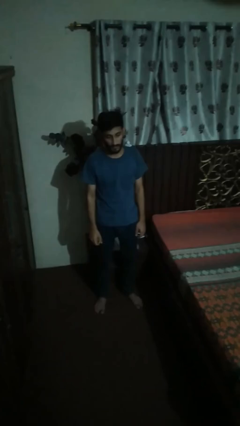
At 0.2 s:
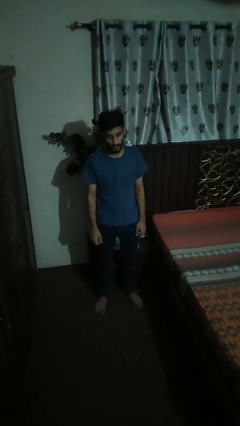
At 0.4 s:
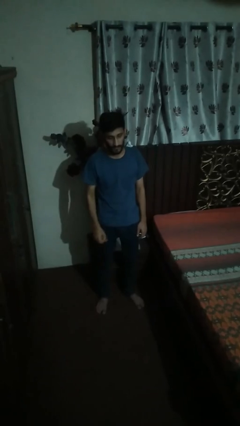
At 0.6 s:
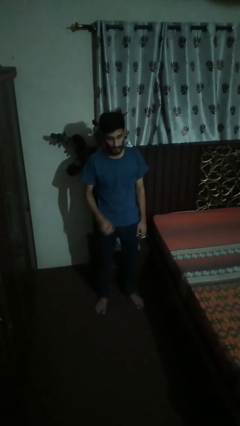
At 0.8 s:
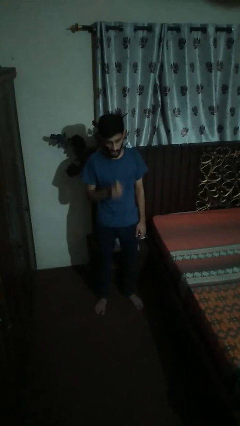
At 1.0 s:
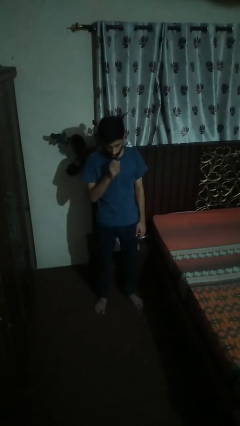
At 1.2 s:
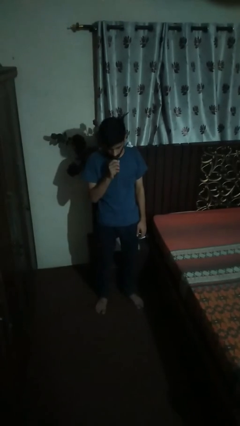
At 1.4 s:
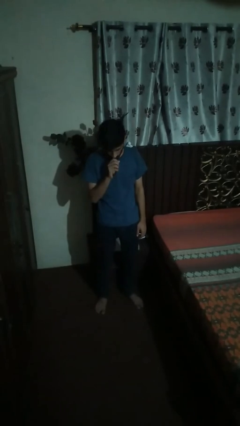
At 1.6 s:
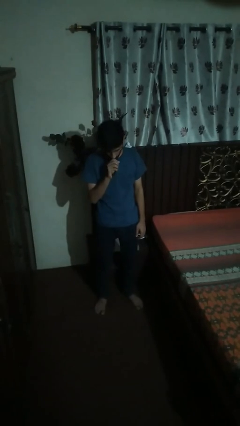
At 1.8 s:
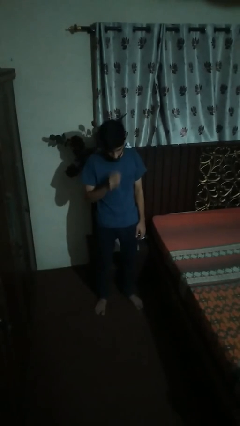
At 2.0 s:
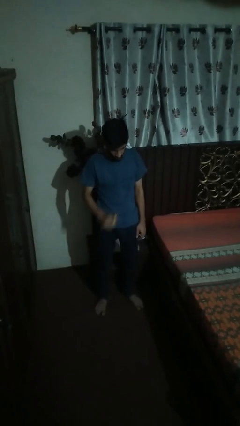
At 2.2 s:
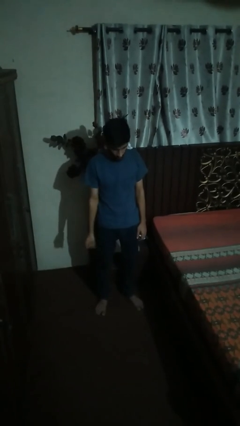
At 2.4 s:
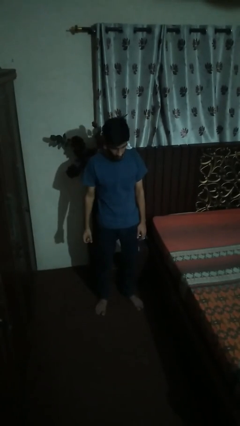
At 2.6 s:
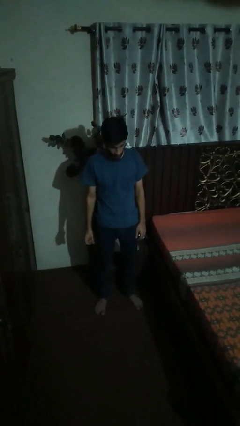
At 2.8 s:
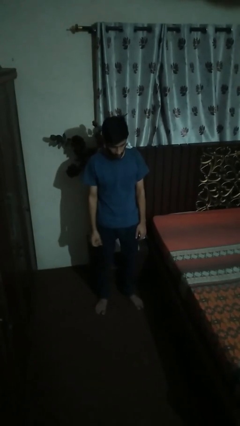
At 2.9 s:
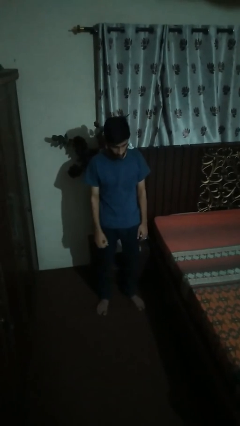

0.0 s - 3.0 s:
person eats banana

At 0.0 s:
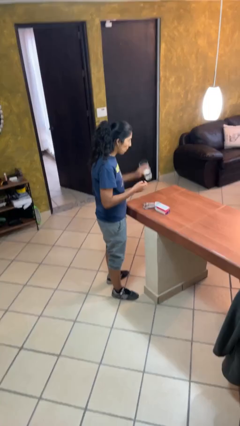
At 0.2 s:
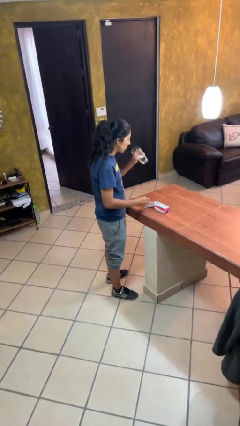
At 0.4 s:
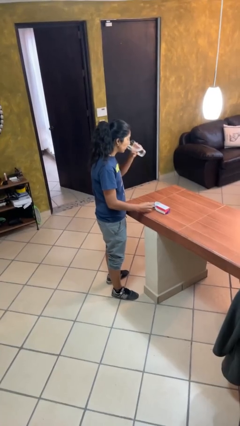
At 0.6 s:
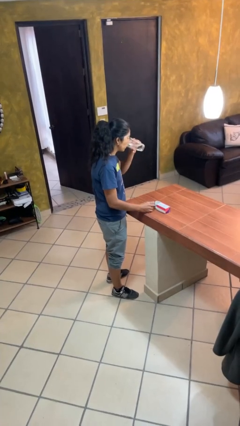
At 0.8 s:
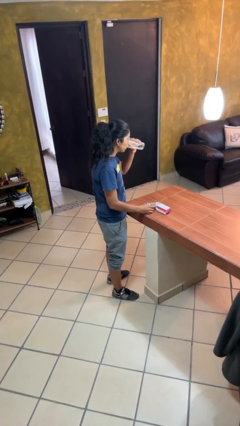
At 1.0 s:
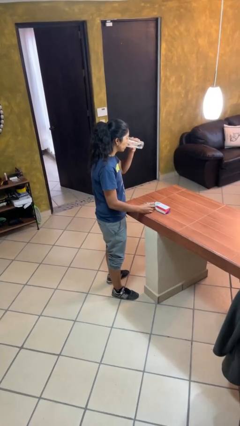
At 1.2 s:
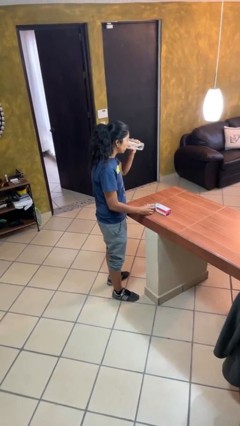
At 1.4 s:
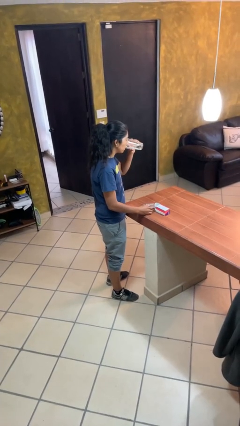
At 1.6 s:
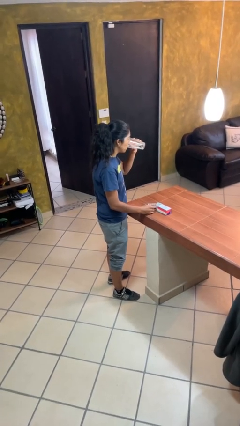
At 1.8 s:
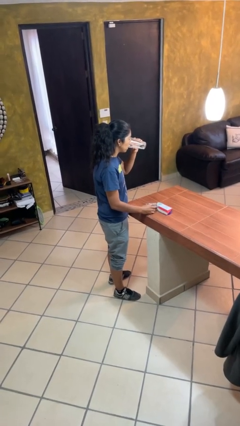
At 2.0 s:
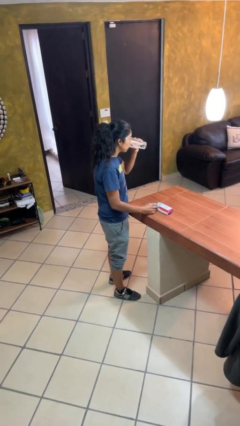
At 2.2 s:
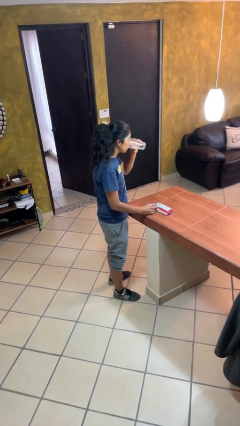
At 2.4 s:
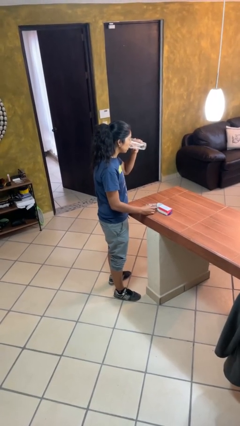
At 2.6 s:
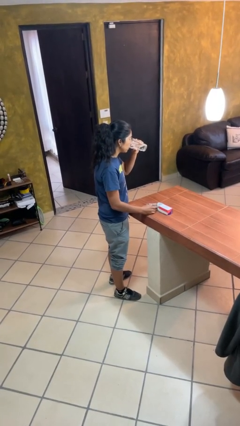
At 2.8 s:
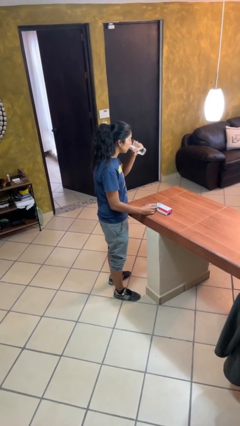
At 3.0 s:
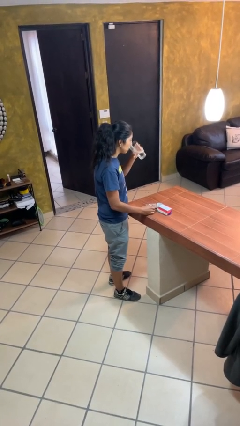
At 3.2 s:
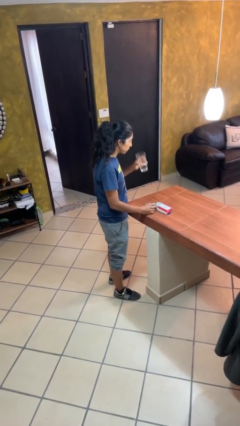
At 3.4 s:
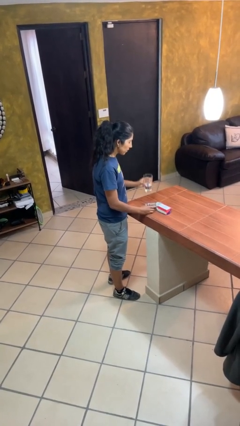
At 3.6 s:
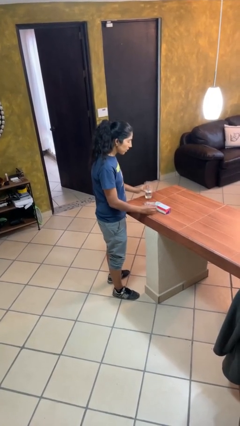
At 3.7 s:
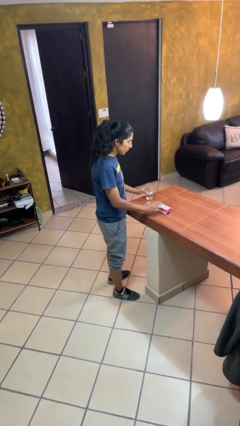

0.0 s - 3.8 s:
person drinks from cup

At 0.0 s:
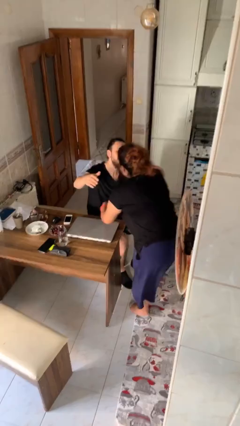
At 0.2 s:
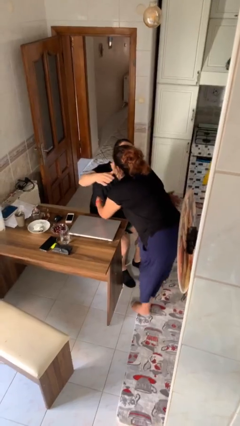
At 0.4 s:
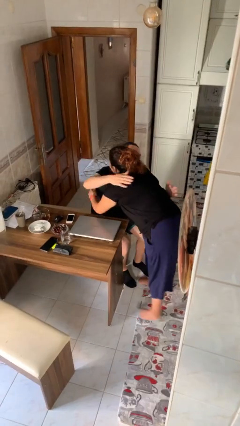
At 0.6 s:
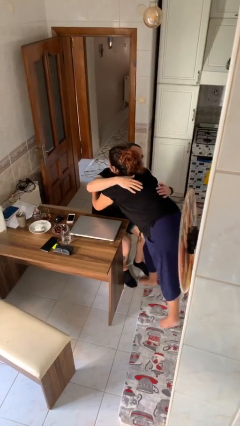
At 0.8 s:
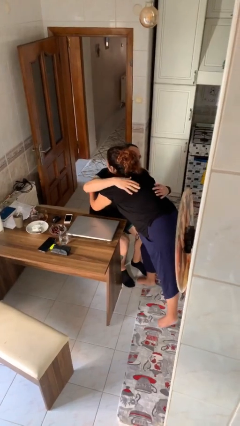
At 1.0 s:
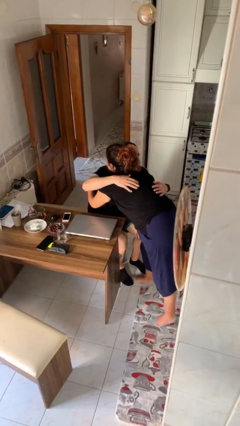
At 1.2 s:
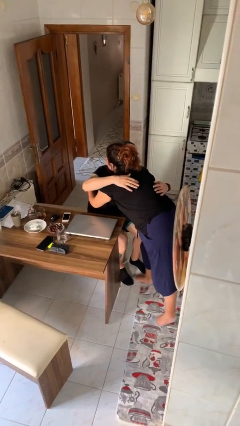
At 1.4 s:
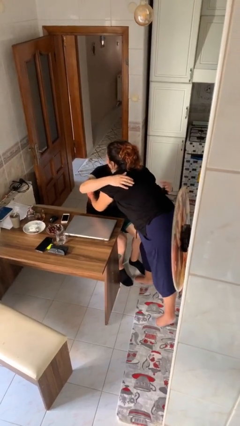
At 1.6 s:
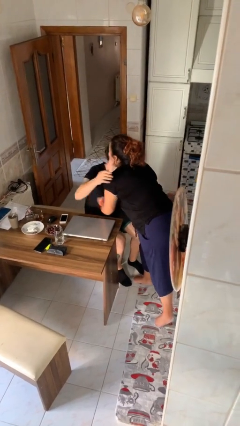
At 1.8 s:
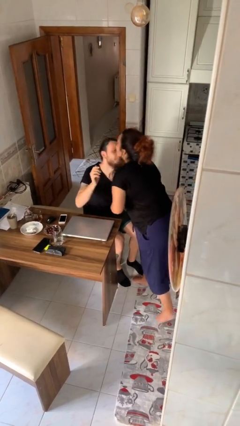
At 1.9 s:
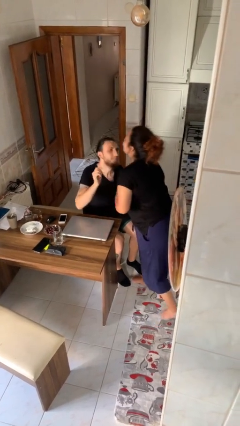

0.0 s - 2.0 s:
person embraces person

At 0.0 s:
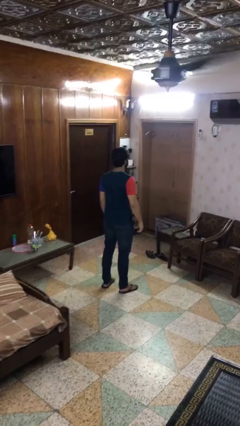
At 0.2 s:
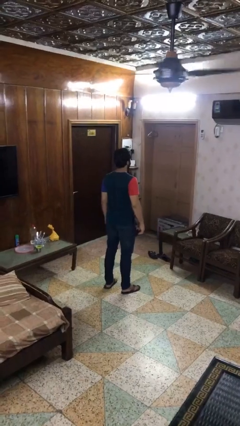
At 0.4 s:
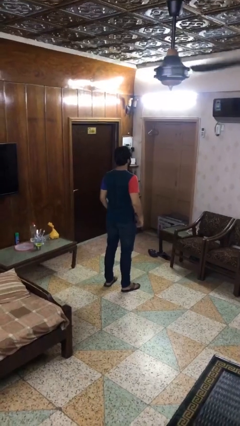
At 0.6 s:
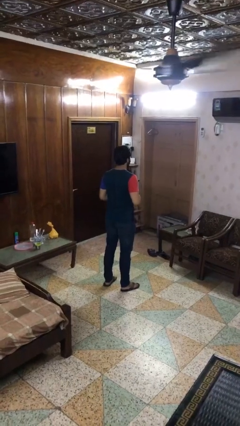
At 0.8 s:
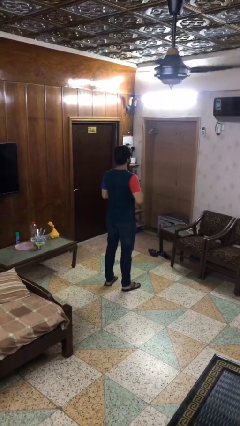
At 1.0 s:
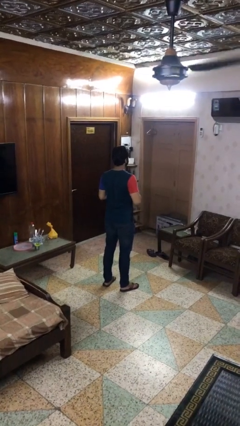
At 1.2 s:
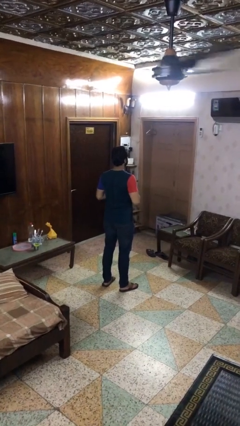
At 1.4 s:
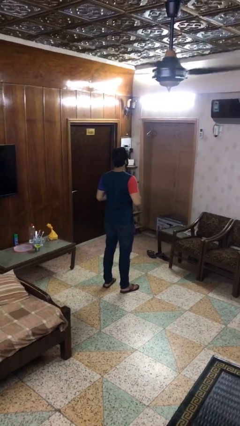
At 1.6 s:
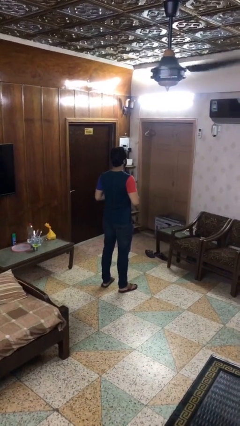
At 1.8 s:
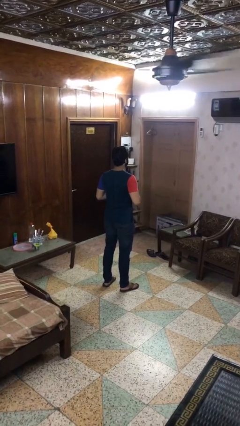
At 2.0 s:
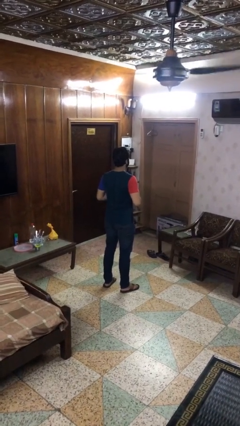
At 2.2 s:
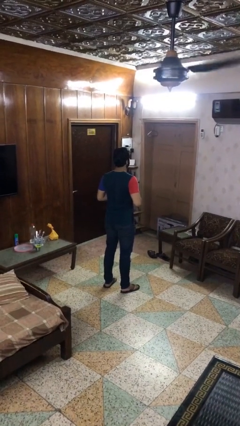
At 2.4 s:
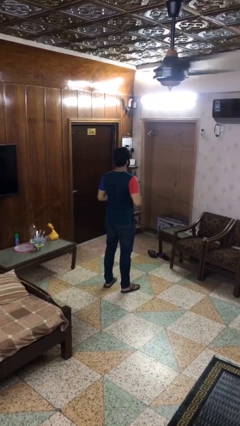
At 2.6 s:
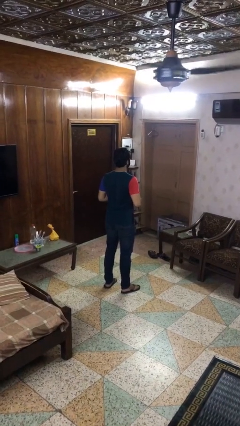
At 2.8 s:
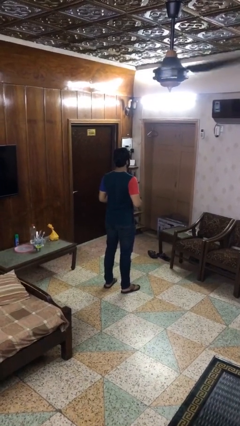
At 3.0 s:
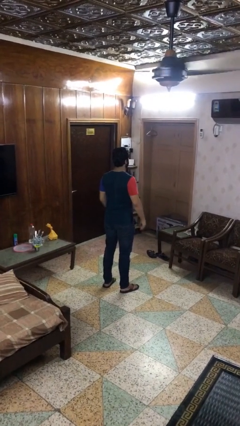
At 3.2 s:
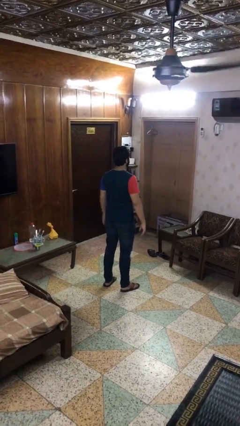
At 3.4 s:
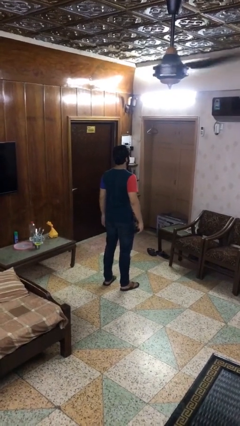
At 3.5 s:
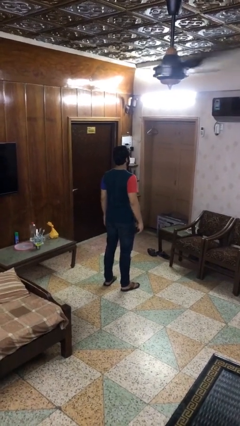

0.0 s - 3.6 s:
person unbuttons shirt

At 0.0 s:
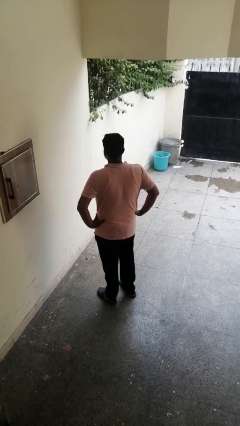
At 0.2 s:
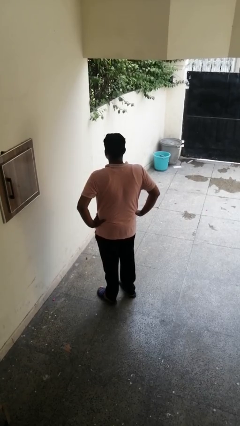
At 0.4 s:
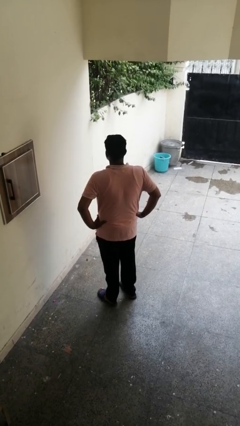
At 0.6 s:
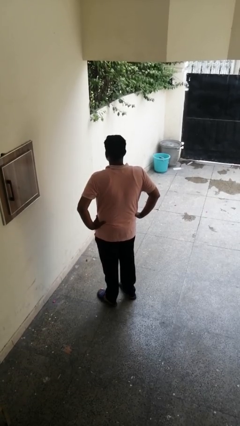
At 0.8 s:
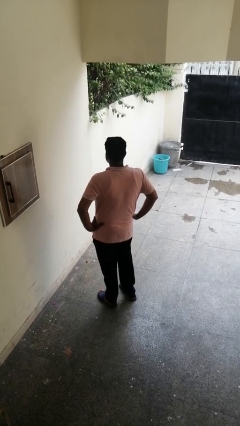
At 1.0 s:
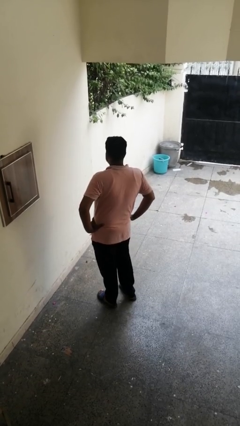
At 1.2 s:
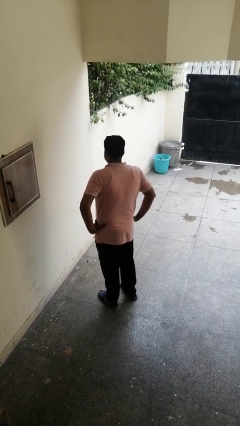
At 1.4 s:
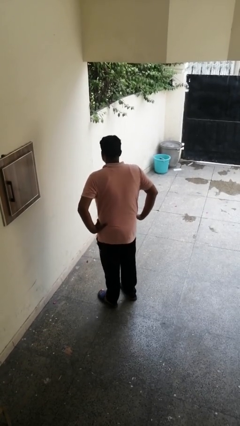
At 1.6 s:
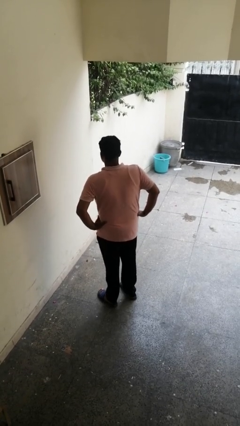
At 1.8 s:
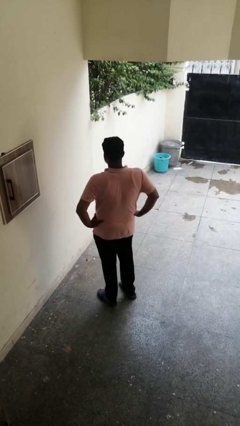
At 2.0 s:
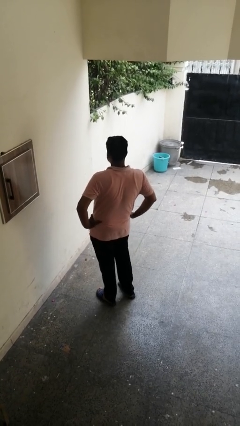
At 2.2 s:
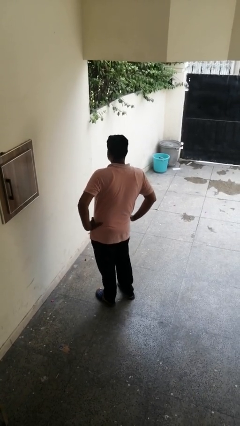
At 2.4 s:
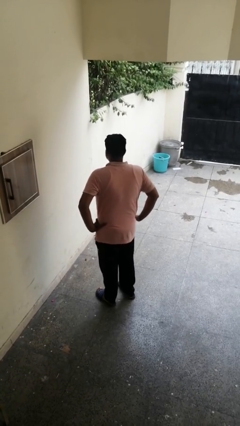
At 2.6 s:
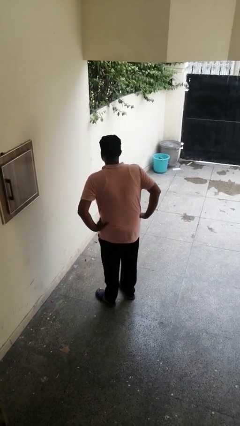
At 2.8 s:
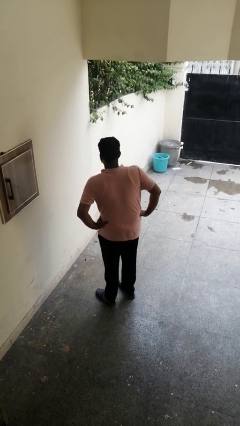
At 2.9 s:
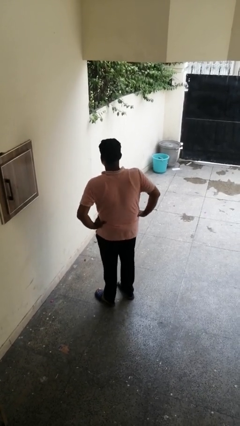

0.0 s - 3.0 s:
person wiggles hips

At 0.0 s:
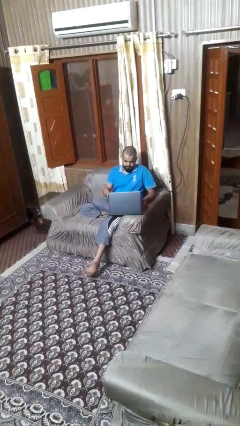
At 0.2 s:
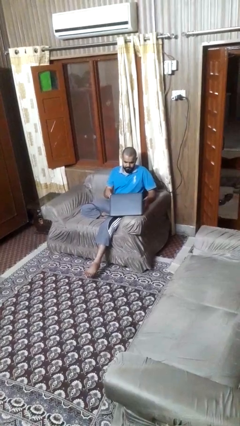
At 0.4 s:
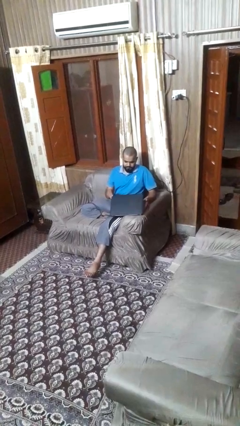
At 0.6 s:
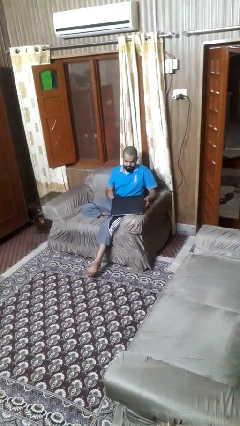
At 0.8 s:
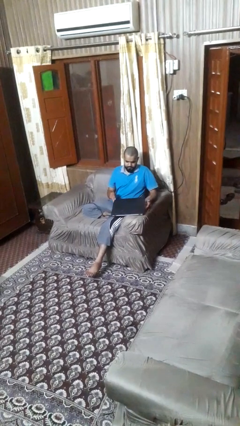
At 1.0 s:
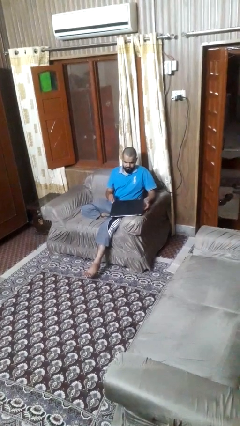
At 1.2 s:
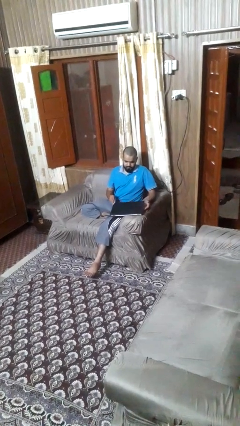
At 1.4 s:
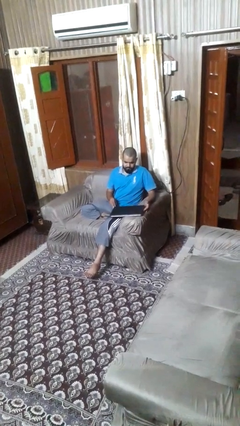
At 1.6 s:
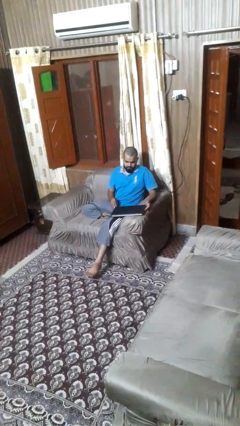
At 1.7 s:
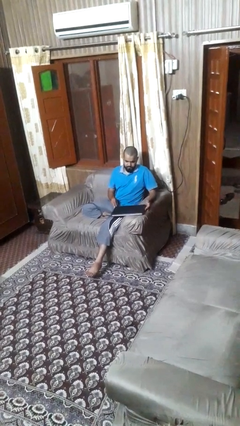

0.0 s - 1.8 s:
person closes laptop
